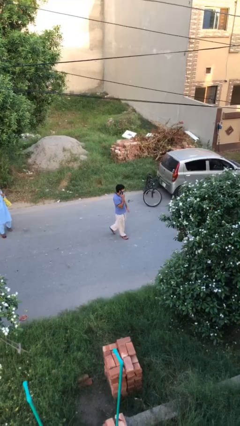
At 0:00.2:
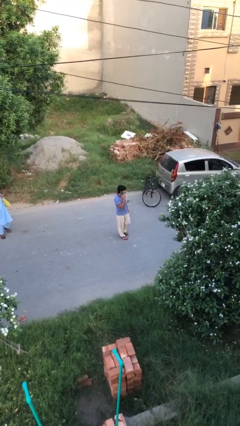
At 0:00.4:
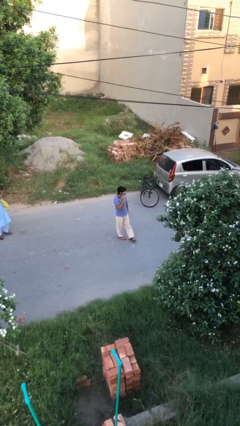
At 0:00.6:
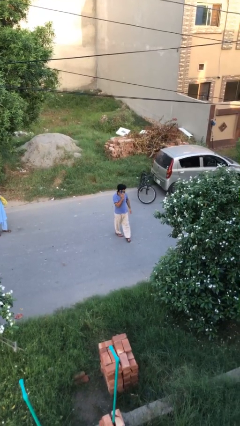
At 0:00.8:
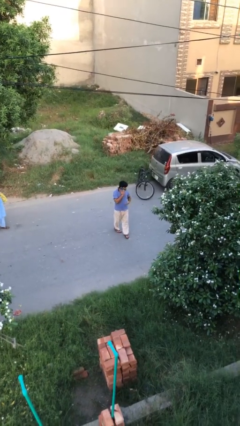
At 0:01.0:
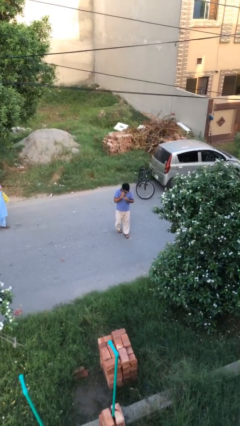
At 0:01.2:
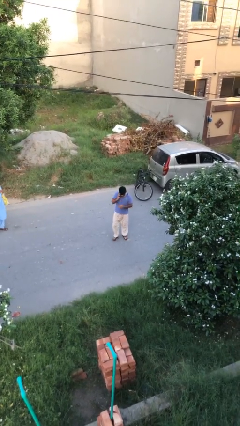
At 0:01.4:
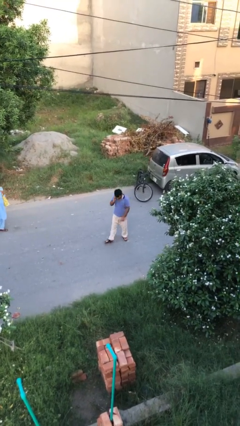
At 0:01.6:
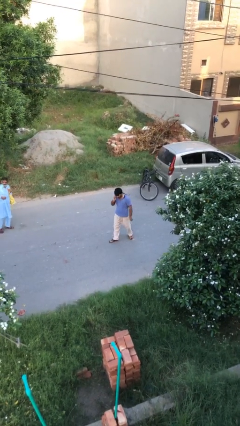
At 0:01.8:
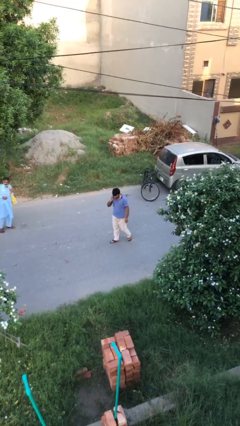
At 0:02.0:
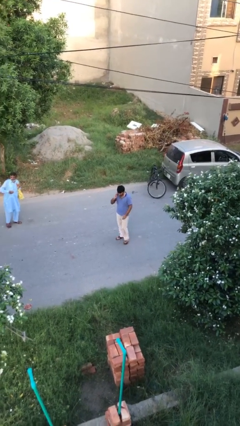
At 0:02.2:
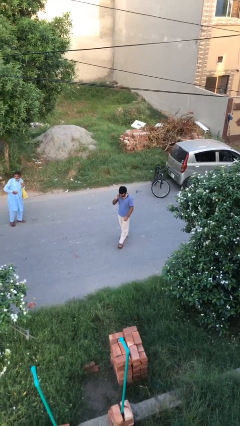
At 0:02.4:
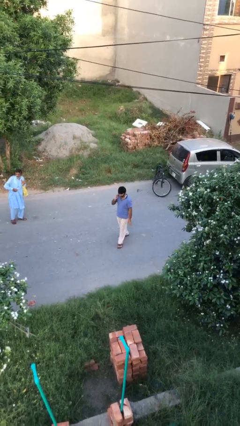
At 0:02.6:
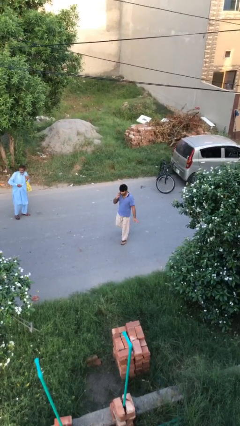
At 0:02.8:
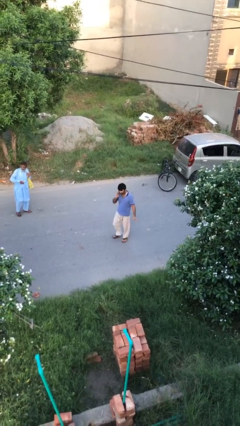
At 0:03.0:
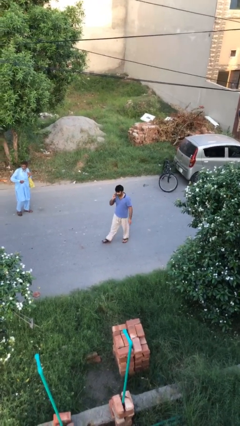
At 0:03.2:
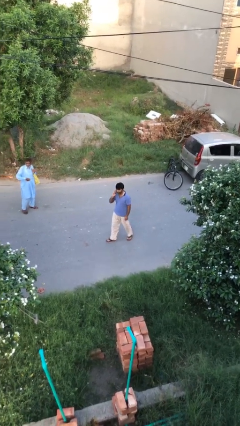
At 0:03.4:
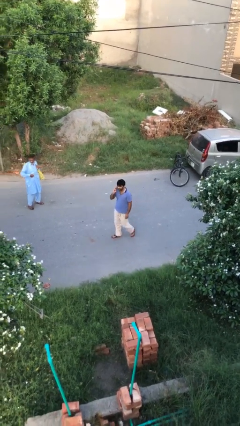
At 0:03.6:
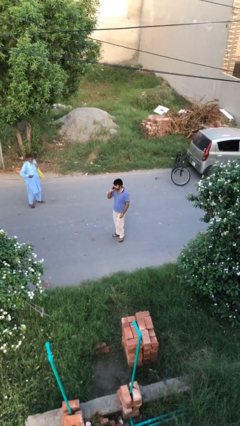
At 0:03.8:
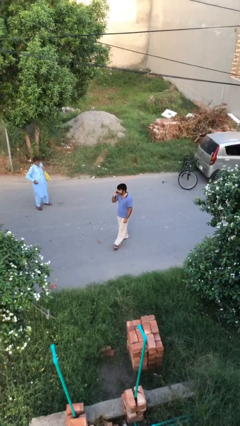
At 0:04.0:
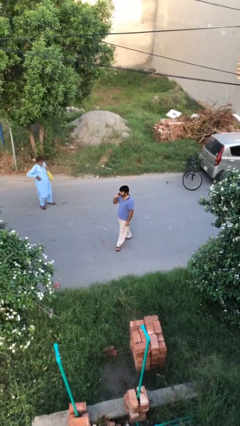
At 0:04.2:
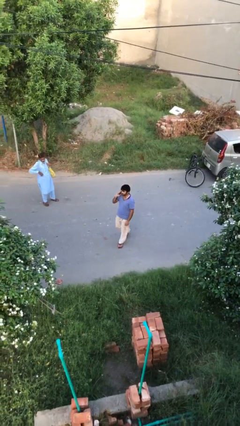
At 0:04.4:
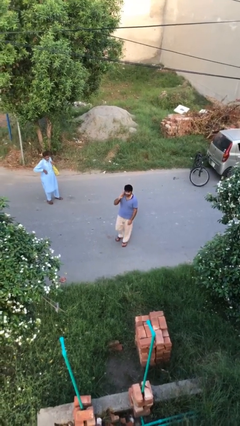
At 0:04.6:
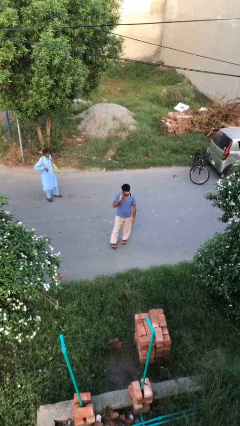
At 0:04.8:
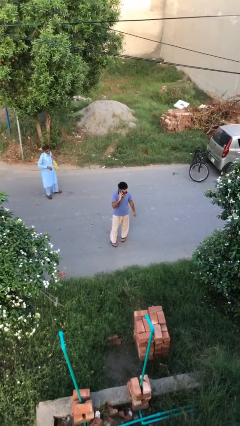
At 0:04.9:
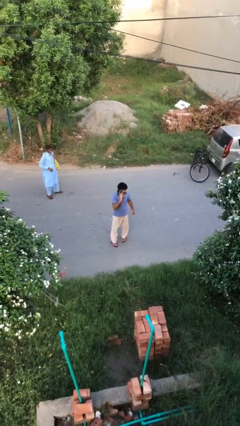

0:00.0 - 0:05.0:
person talks on phone

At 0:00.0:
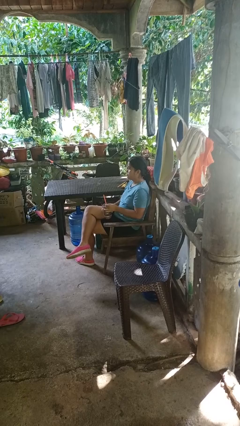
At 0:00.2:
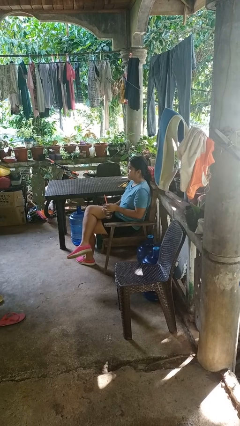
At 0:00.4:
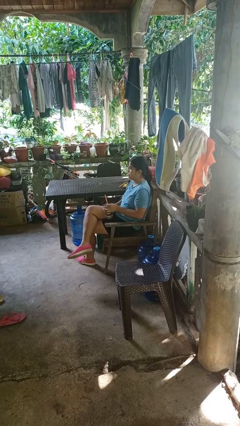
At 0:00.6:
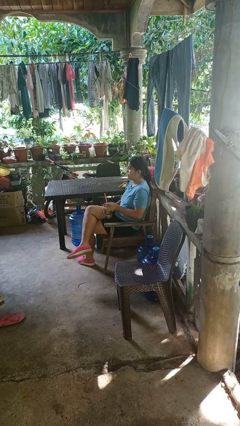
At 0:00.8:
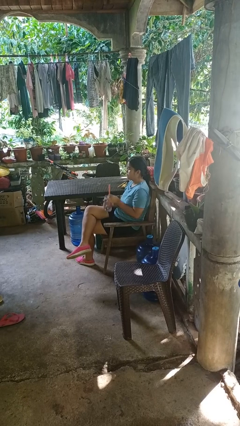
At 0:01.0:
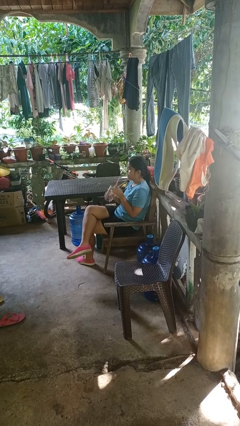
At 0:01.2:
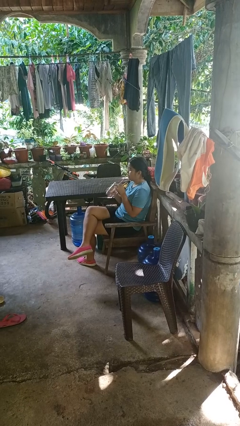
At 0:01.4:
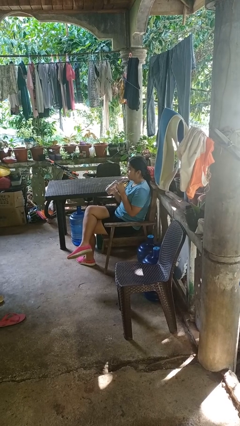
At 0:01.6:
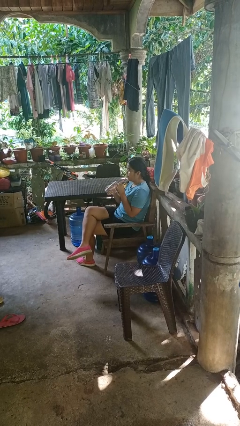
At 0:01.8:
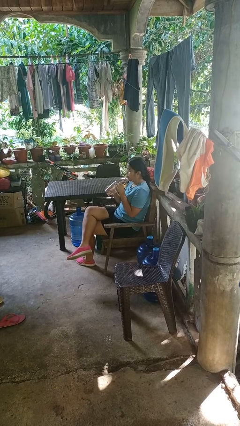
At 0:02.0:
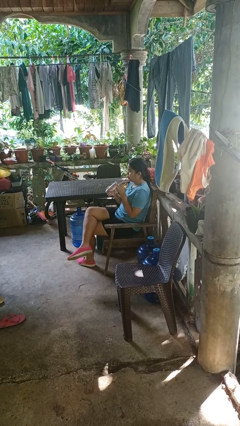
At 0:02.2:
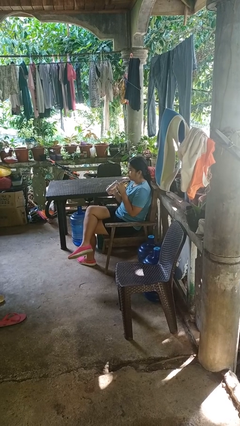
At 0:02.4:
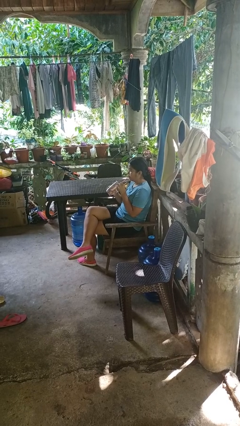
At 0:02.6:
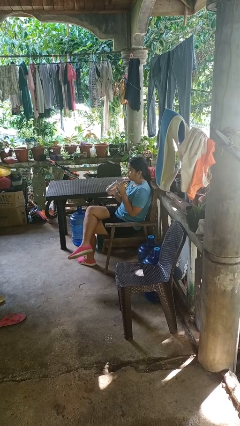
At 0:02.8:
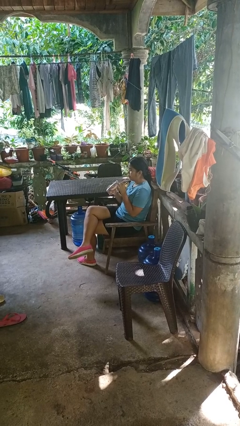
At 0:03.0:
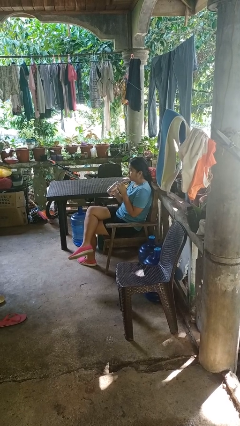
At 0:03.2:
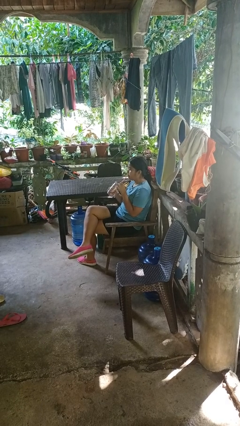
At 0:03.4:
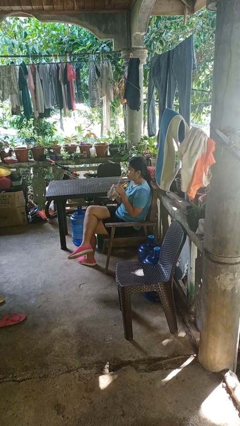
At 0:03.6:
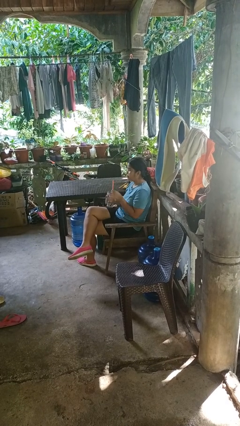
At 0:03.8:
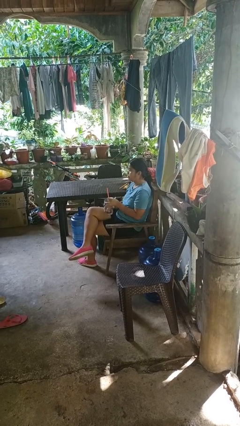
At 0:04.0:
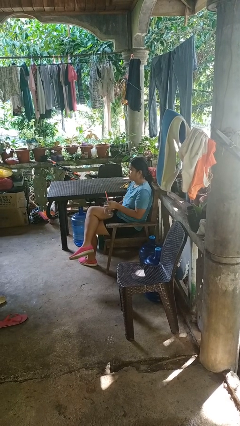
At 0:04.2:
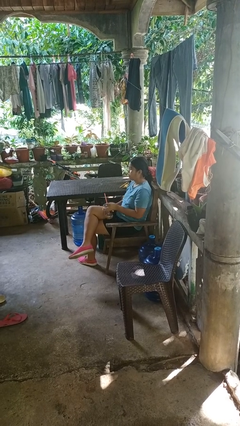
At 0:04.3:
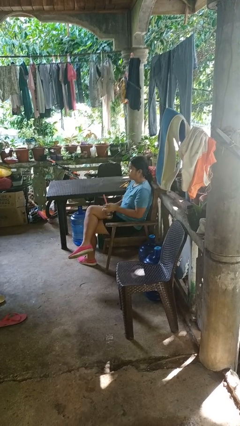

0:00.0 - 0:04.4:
person drinks from straw

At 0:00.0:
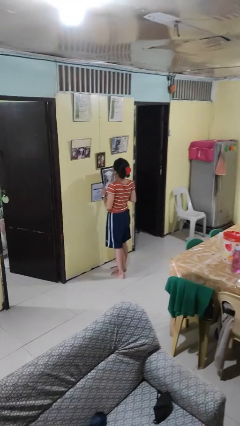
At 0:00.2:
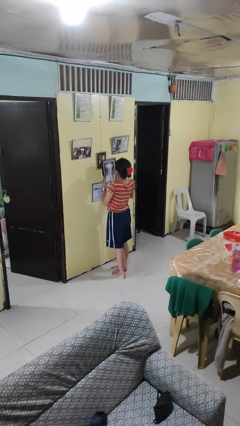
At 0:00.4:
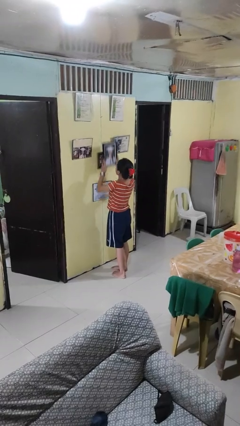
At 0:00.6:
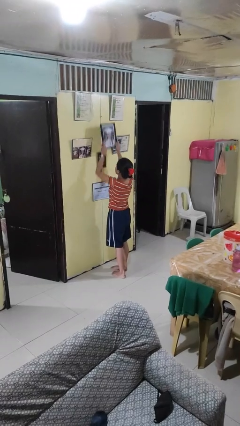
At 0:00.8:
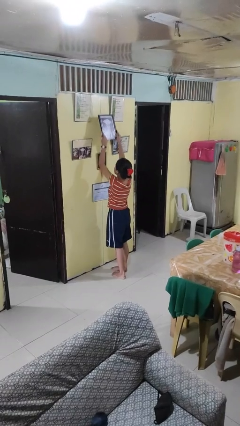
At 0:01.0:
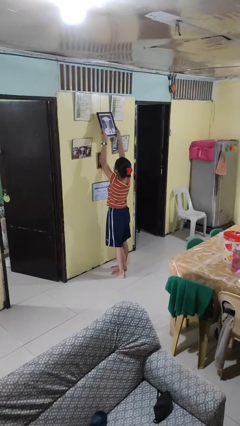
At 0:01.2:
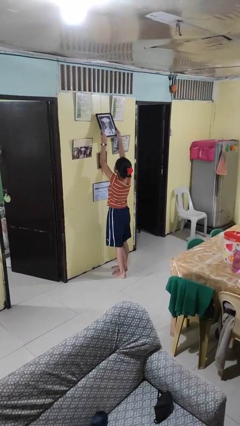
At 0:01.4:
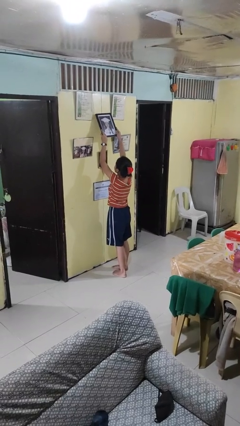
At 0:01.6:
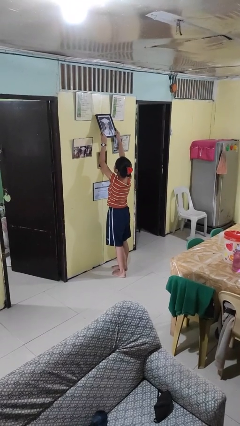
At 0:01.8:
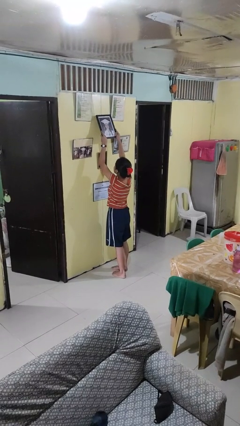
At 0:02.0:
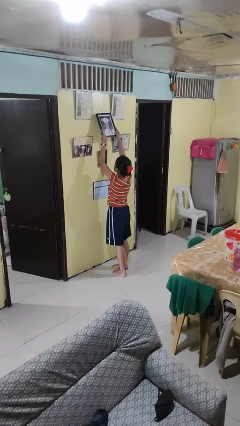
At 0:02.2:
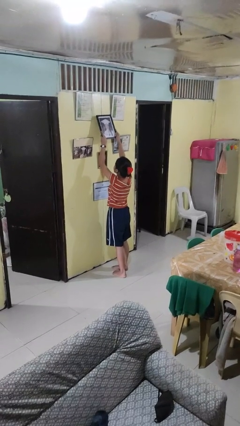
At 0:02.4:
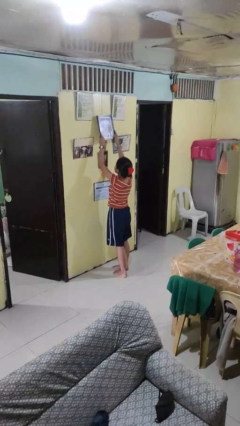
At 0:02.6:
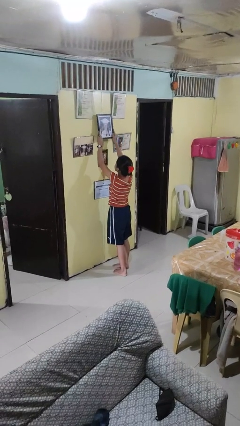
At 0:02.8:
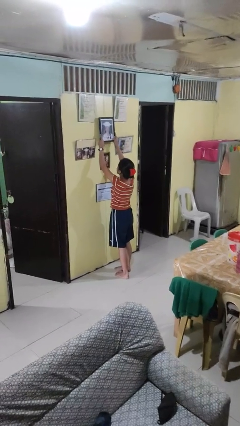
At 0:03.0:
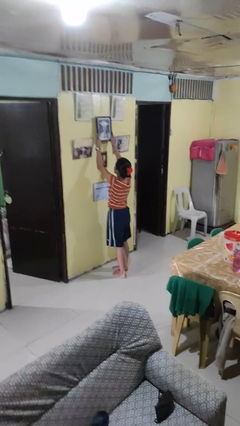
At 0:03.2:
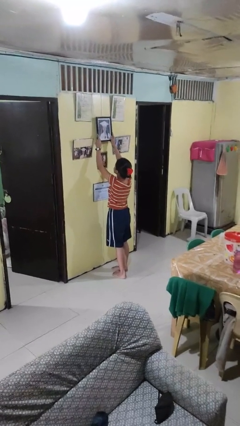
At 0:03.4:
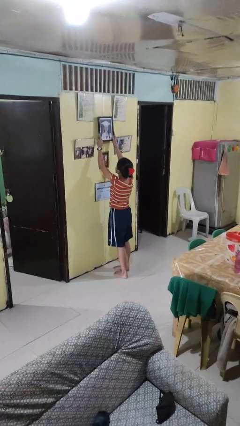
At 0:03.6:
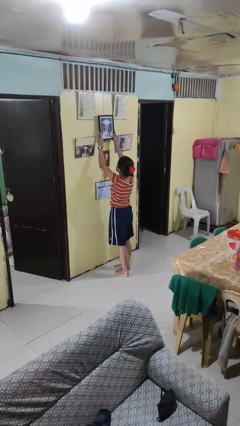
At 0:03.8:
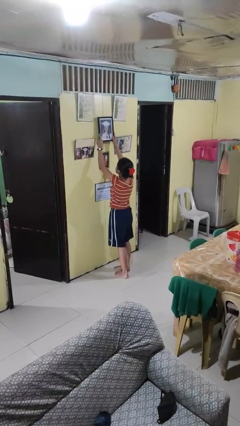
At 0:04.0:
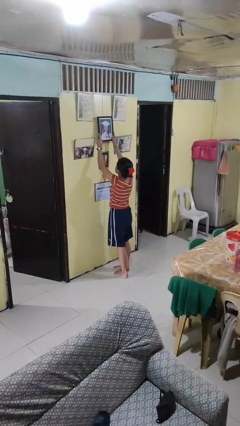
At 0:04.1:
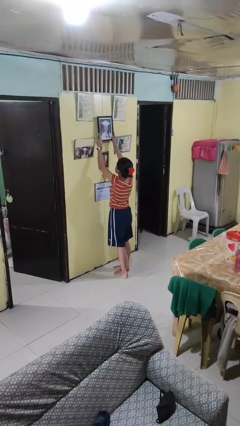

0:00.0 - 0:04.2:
person puts up picture frame

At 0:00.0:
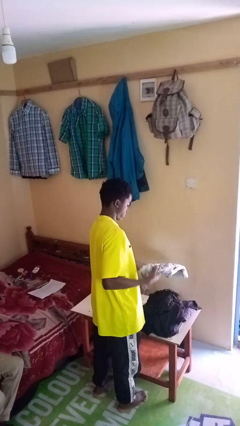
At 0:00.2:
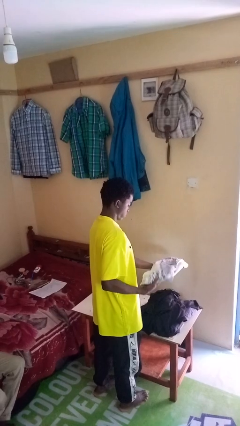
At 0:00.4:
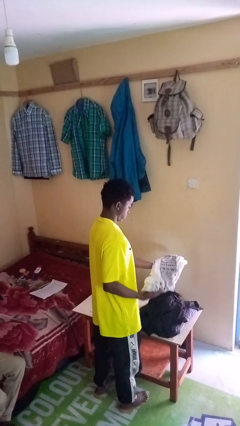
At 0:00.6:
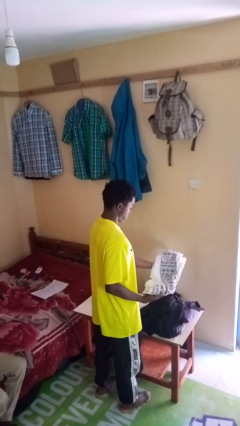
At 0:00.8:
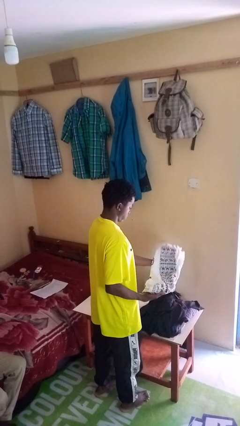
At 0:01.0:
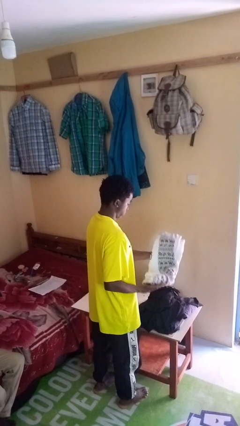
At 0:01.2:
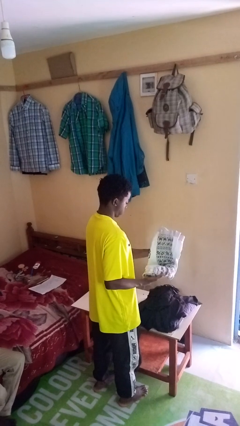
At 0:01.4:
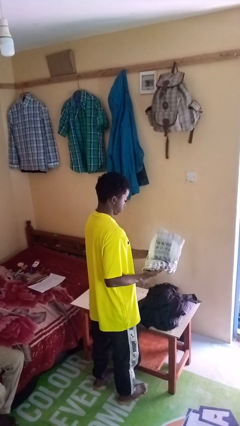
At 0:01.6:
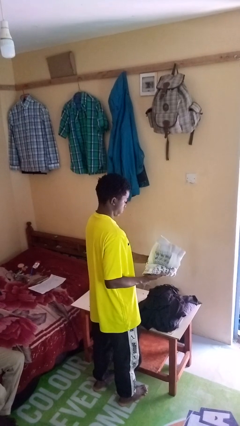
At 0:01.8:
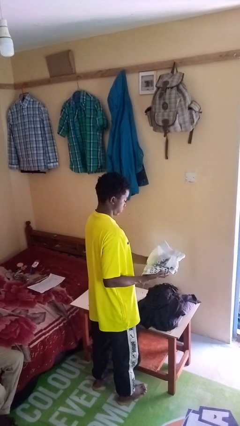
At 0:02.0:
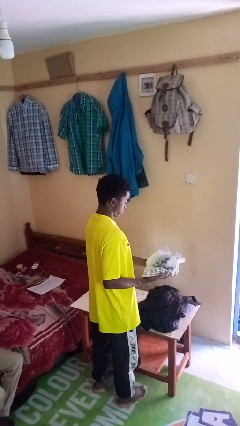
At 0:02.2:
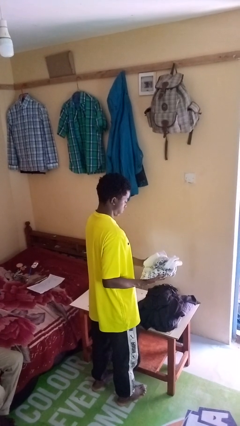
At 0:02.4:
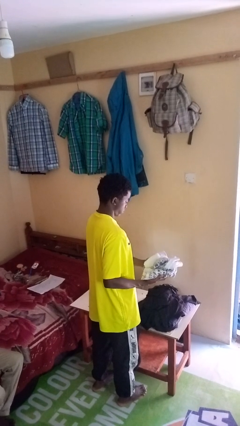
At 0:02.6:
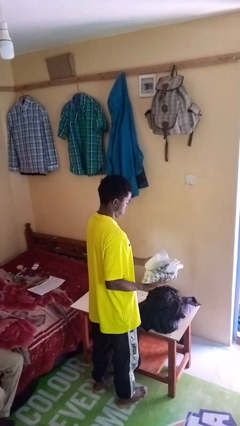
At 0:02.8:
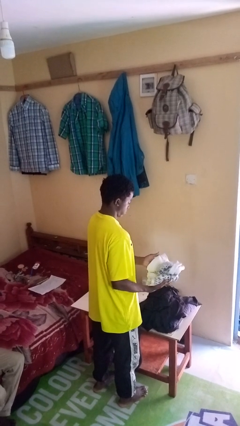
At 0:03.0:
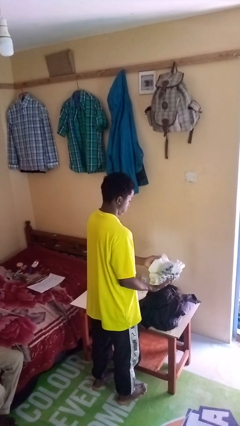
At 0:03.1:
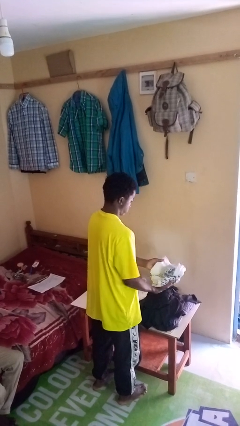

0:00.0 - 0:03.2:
person folds shirt

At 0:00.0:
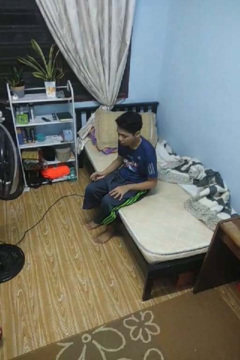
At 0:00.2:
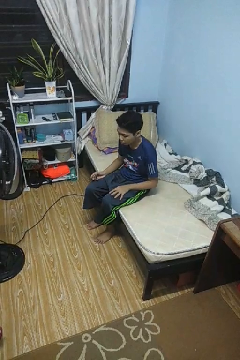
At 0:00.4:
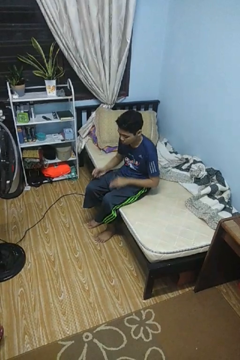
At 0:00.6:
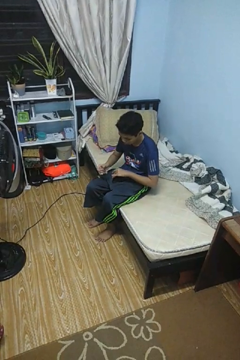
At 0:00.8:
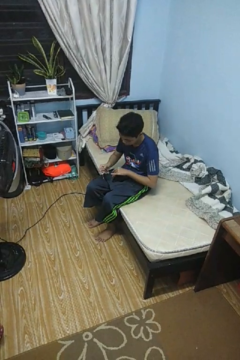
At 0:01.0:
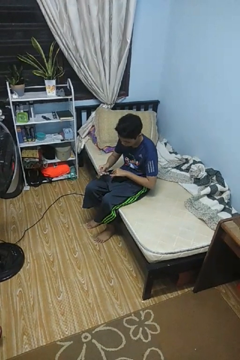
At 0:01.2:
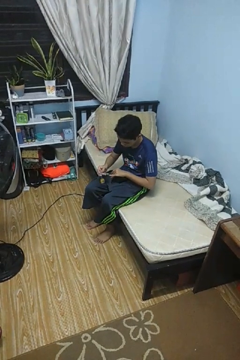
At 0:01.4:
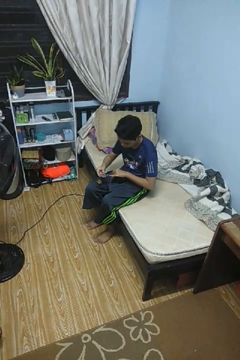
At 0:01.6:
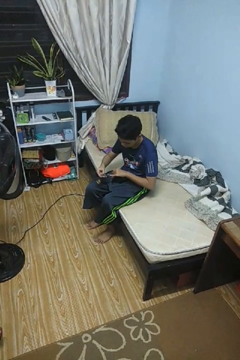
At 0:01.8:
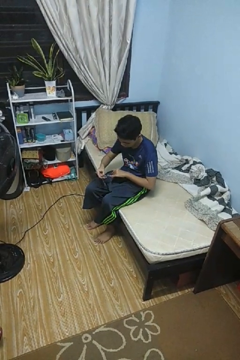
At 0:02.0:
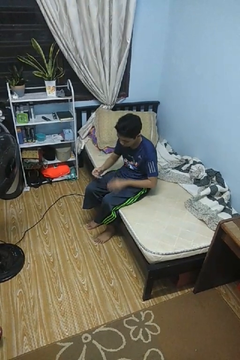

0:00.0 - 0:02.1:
person clips fingernails
